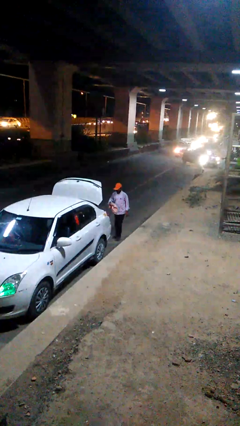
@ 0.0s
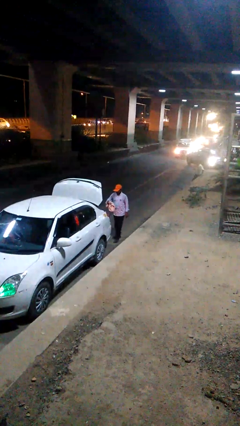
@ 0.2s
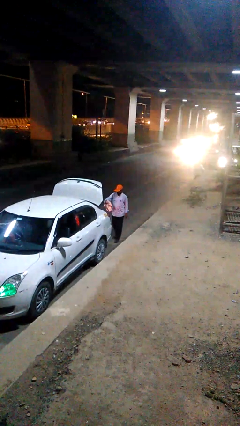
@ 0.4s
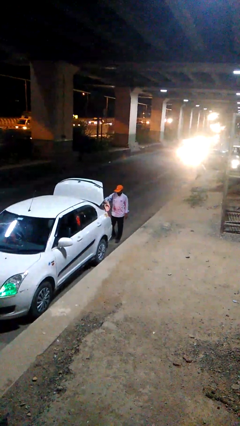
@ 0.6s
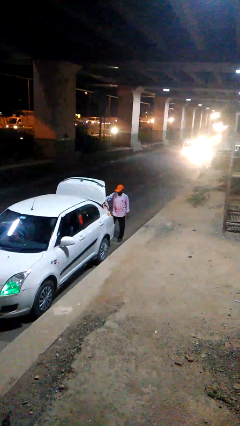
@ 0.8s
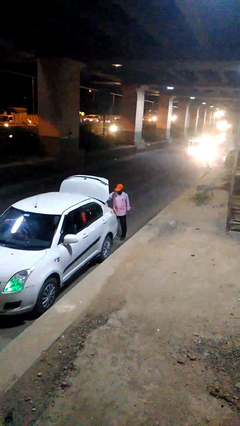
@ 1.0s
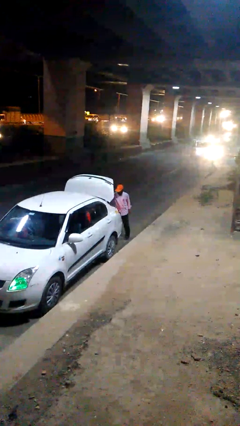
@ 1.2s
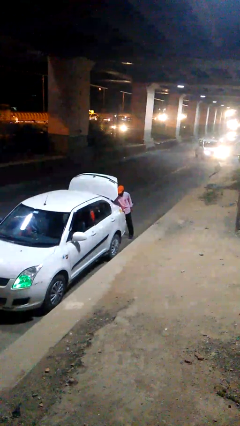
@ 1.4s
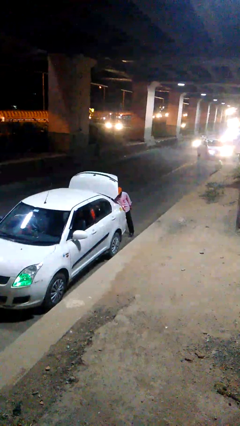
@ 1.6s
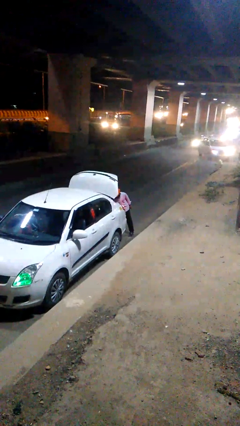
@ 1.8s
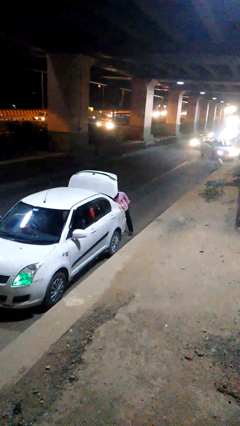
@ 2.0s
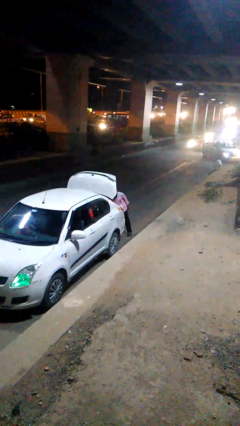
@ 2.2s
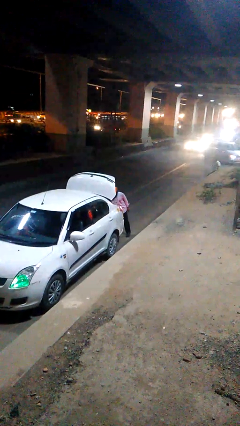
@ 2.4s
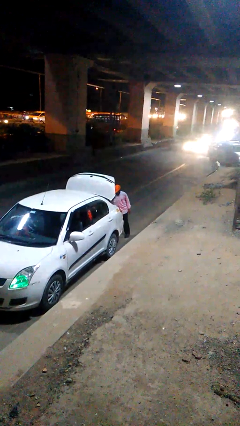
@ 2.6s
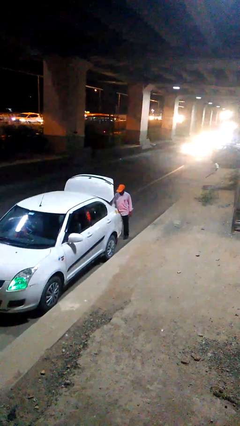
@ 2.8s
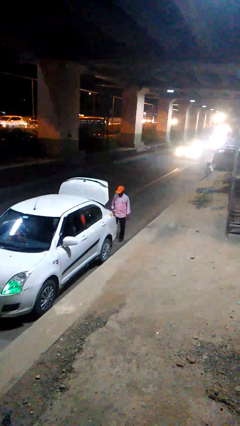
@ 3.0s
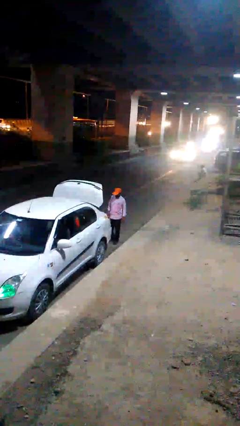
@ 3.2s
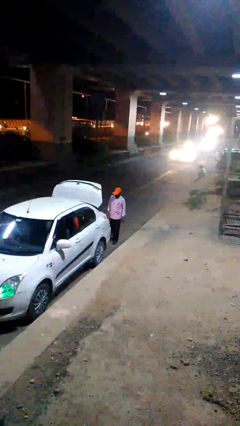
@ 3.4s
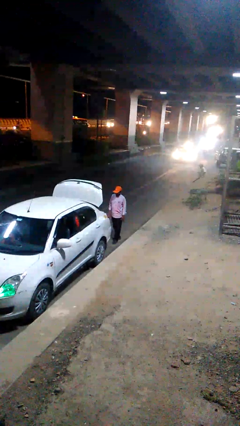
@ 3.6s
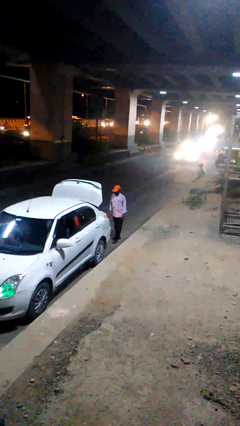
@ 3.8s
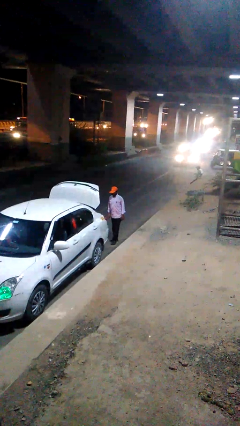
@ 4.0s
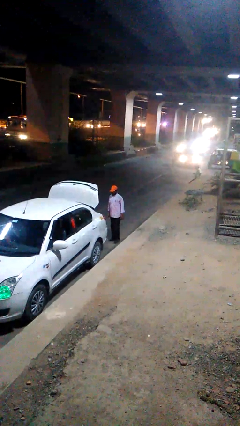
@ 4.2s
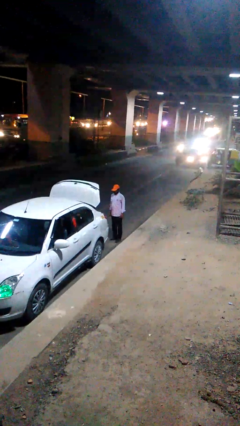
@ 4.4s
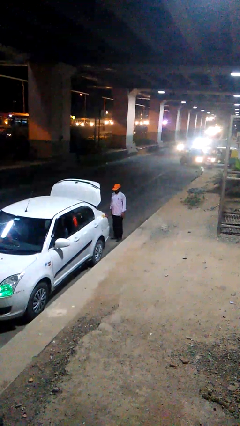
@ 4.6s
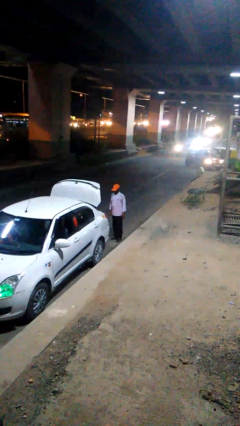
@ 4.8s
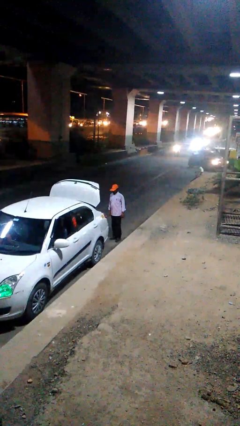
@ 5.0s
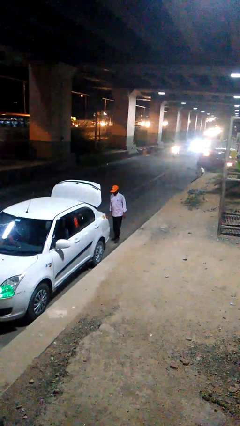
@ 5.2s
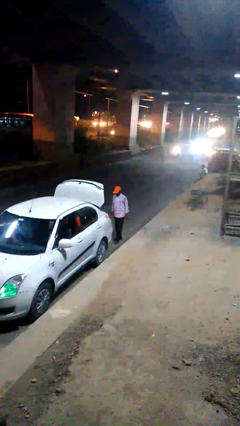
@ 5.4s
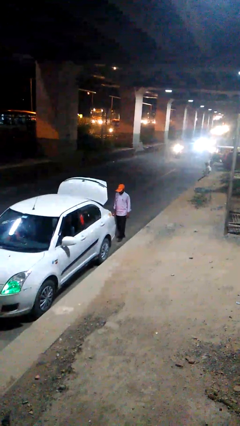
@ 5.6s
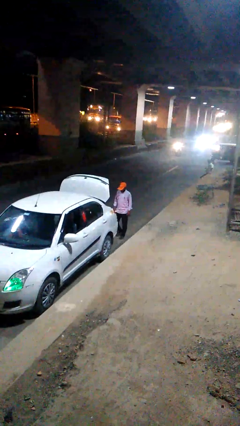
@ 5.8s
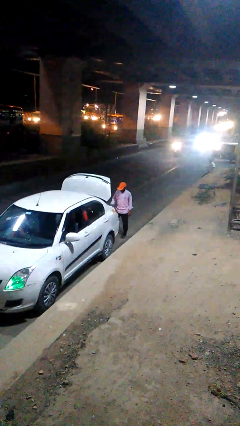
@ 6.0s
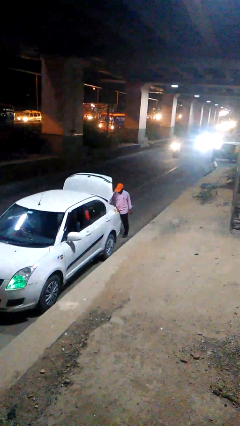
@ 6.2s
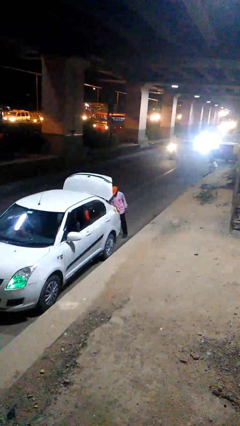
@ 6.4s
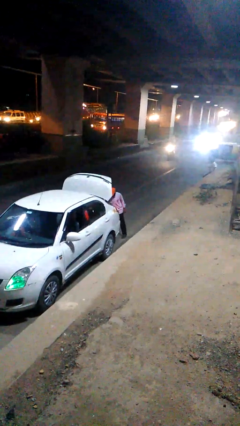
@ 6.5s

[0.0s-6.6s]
person loads car

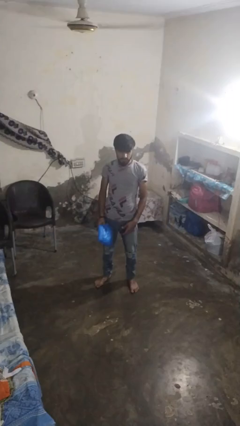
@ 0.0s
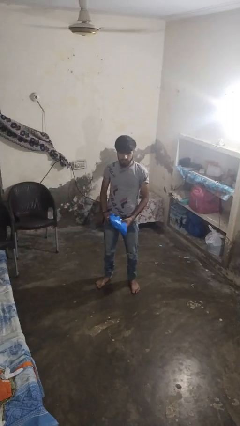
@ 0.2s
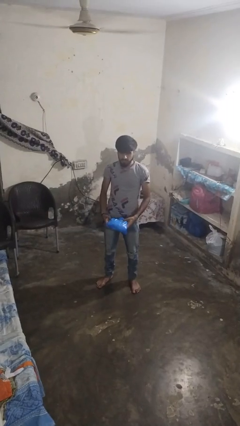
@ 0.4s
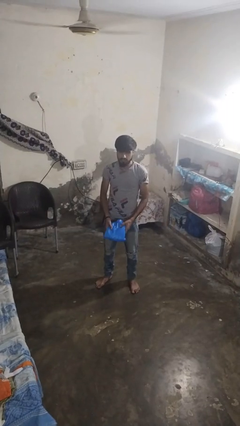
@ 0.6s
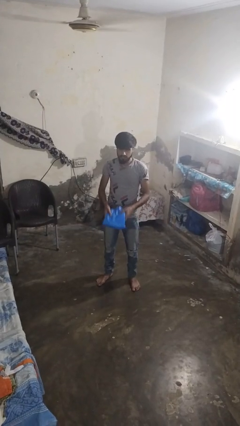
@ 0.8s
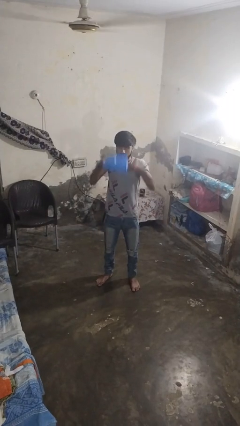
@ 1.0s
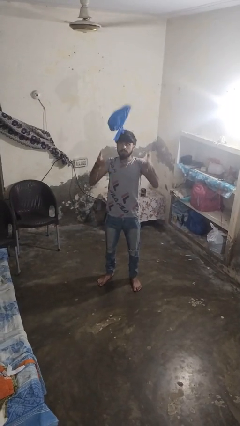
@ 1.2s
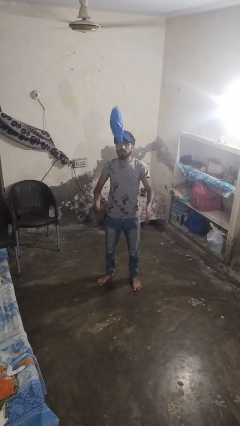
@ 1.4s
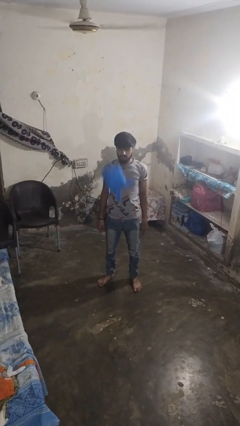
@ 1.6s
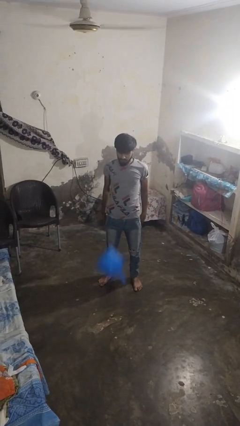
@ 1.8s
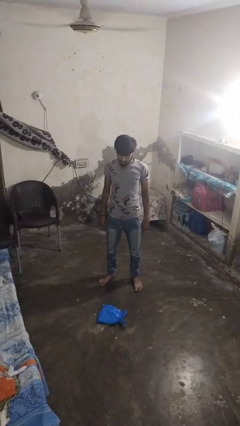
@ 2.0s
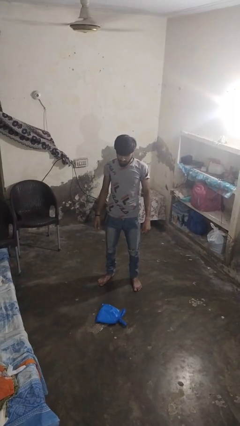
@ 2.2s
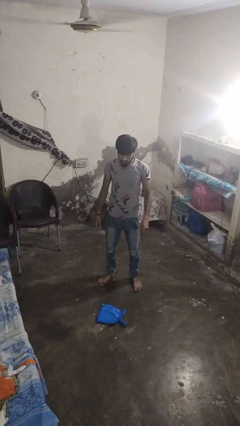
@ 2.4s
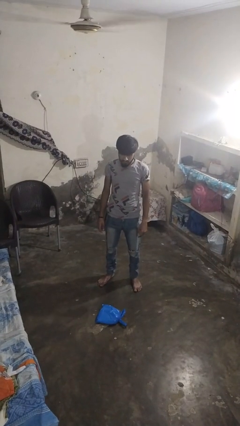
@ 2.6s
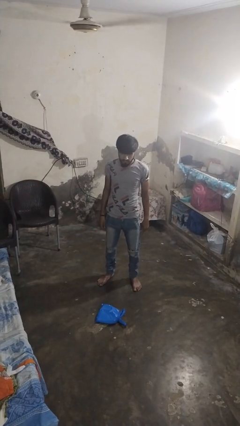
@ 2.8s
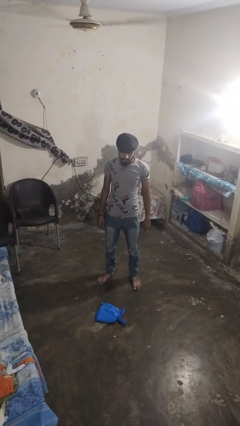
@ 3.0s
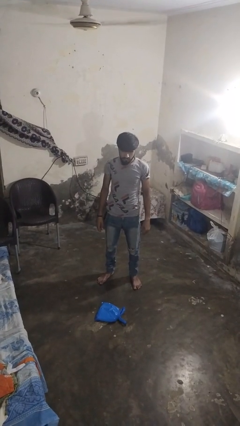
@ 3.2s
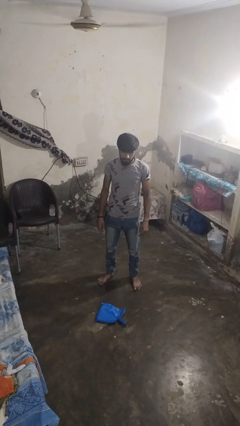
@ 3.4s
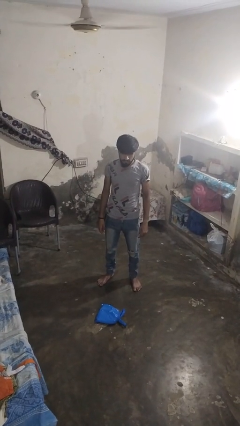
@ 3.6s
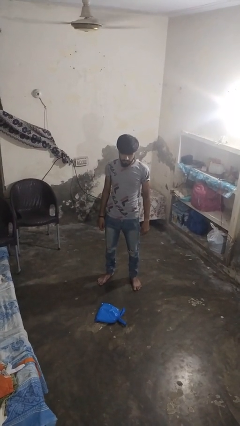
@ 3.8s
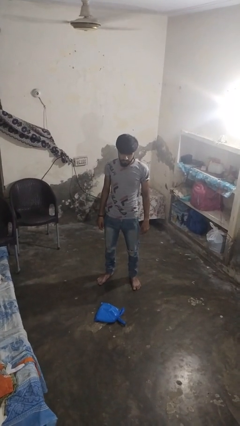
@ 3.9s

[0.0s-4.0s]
person throws object into air

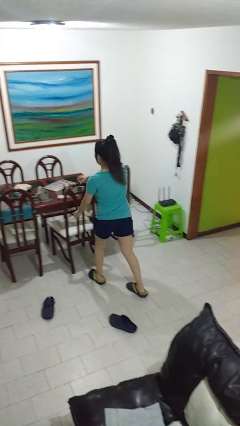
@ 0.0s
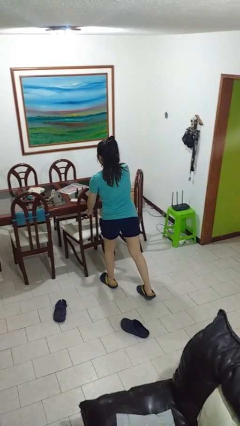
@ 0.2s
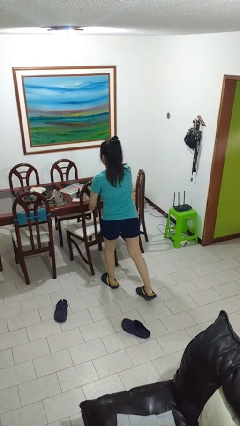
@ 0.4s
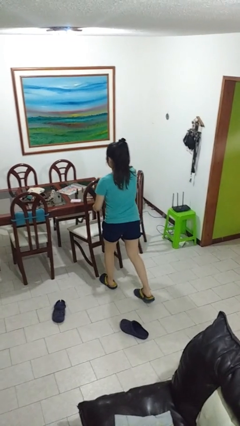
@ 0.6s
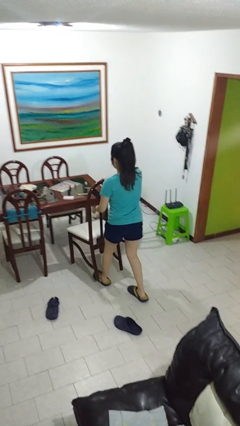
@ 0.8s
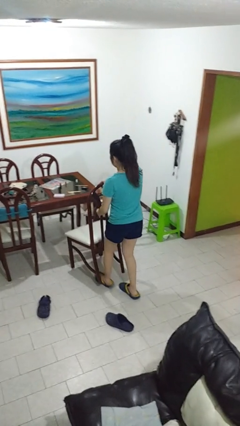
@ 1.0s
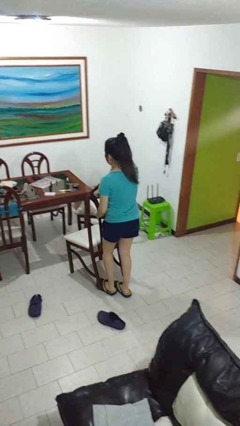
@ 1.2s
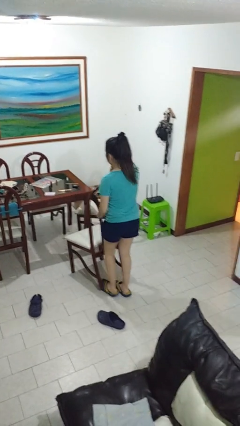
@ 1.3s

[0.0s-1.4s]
person pulls out chair

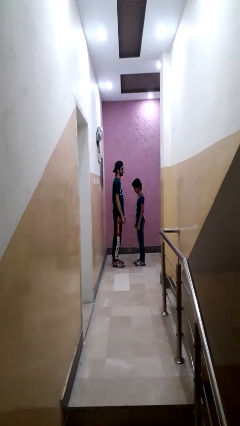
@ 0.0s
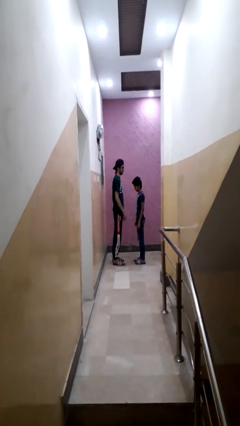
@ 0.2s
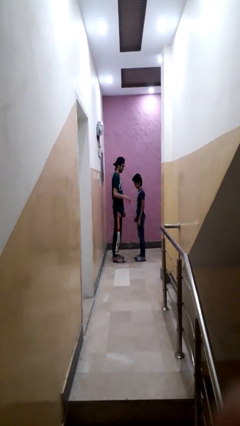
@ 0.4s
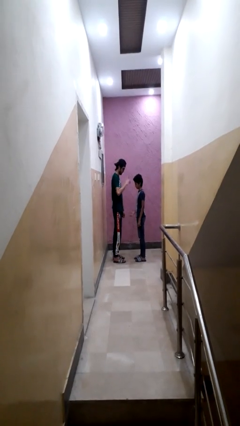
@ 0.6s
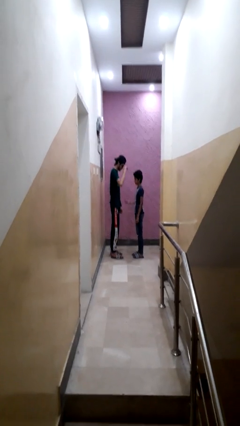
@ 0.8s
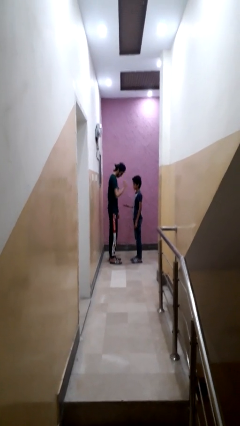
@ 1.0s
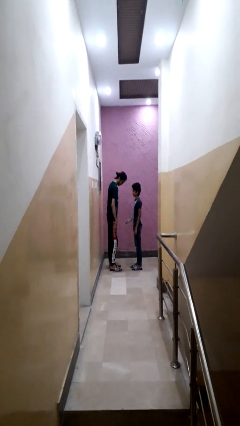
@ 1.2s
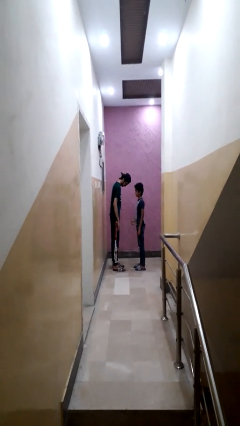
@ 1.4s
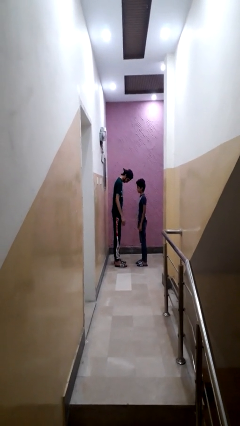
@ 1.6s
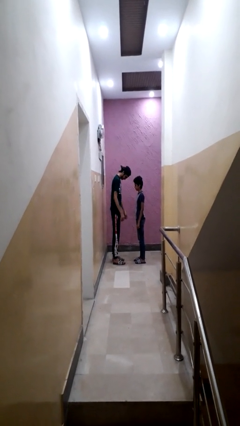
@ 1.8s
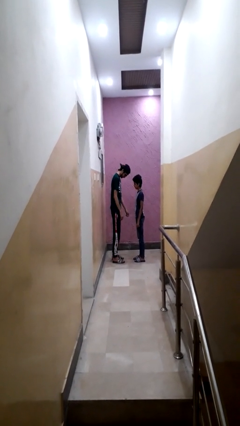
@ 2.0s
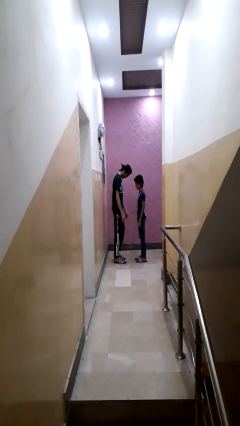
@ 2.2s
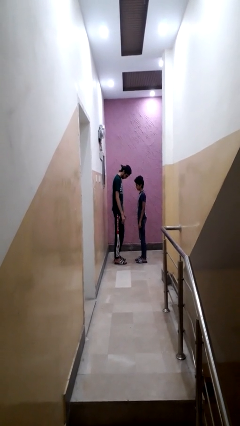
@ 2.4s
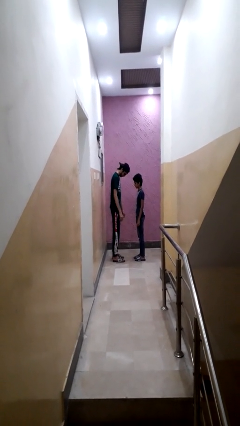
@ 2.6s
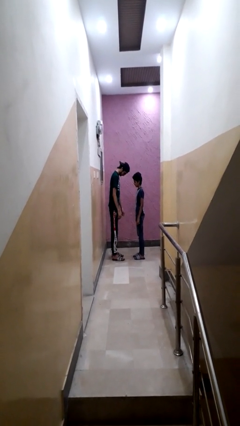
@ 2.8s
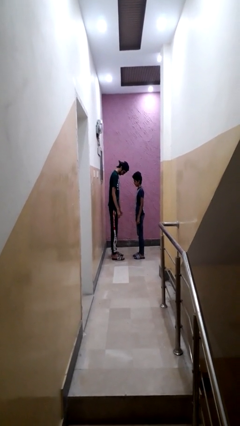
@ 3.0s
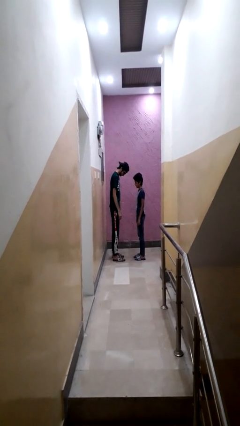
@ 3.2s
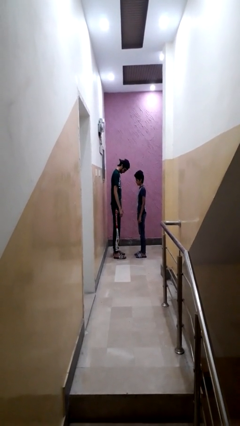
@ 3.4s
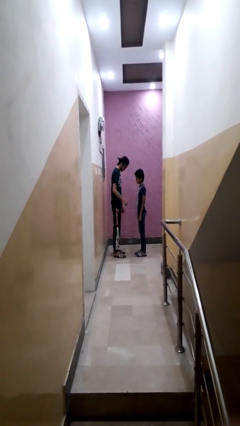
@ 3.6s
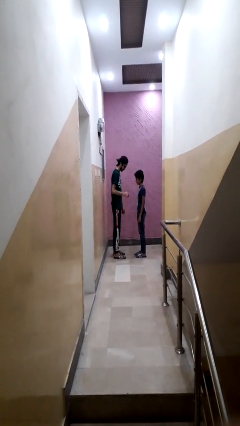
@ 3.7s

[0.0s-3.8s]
person highfives hand

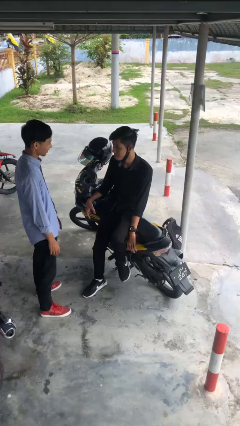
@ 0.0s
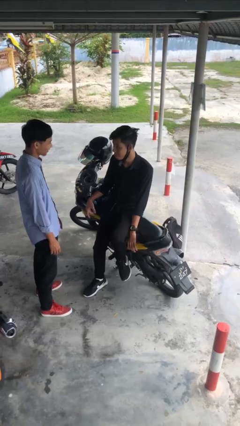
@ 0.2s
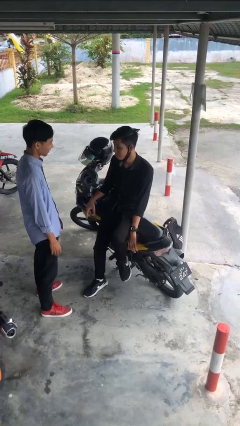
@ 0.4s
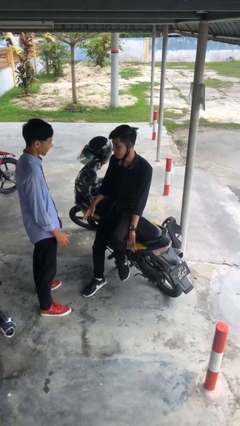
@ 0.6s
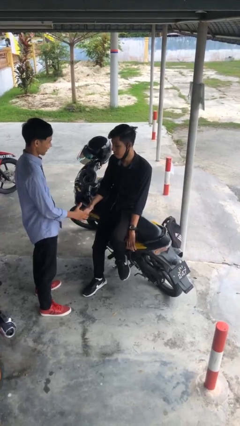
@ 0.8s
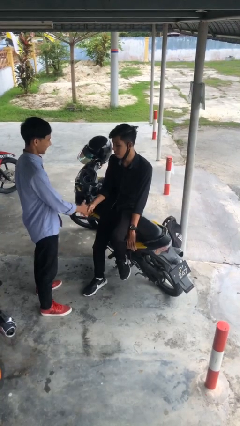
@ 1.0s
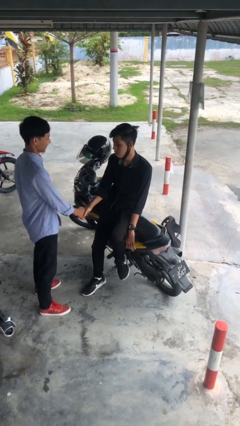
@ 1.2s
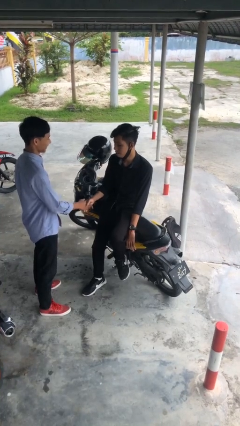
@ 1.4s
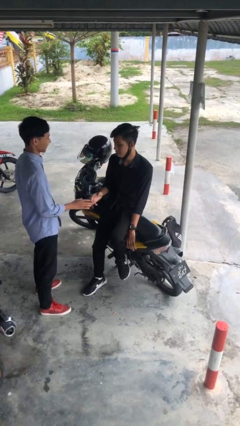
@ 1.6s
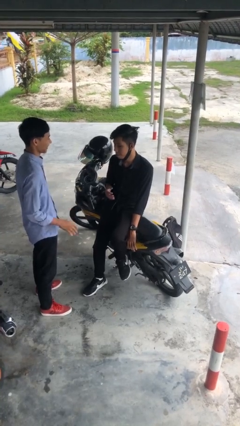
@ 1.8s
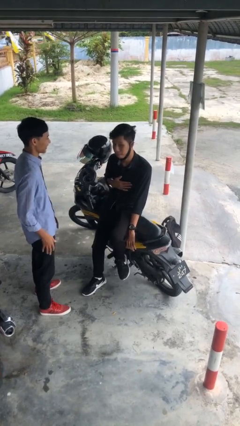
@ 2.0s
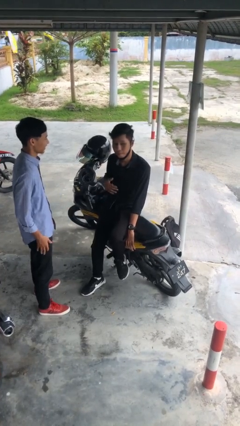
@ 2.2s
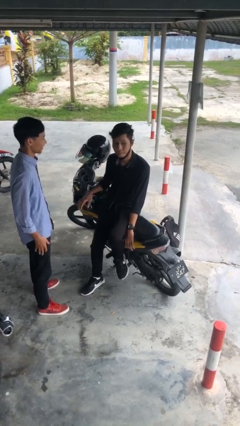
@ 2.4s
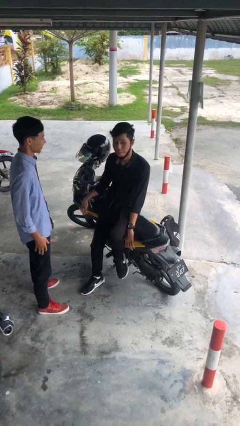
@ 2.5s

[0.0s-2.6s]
person shakes hand
